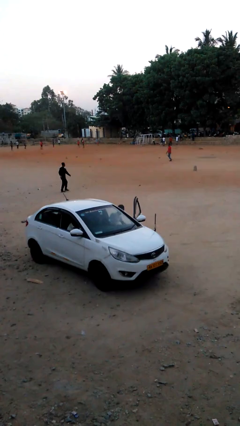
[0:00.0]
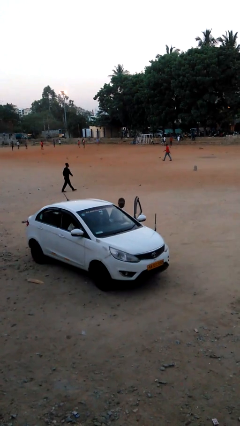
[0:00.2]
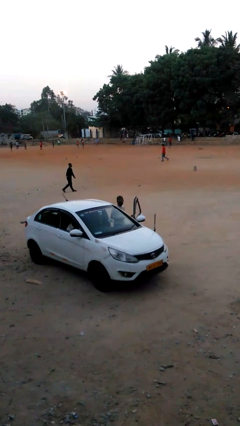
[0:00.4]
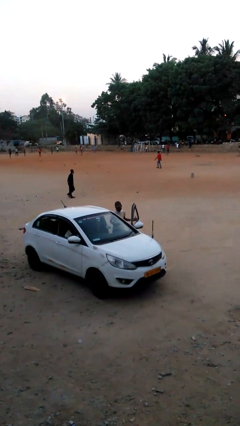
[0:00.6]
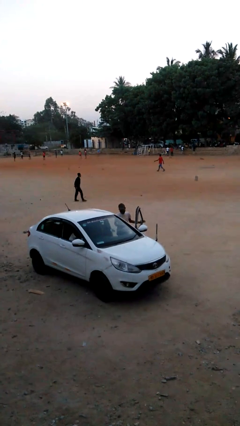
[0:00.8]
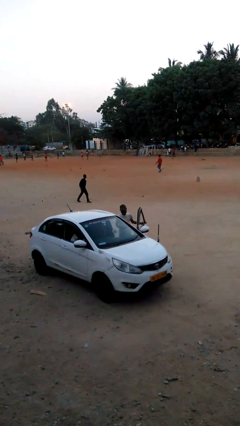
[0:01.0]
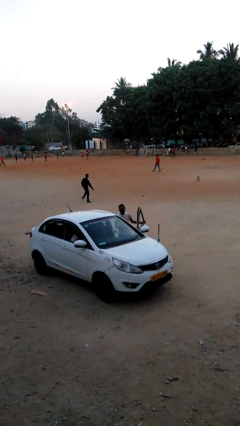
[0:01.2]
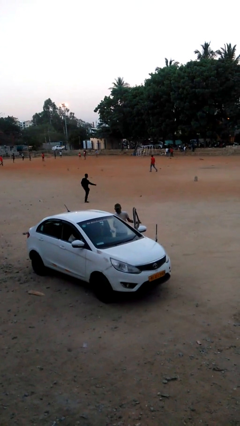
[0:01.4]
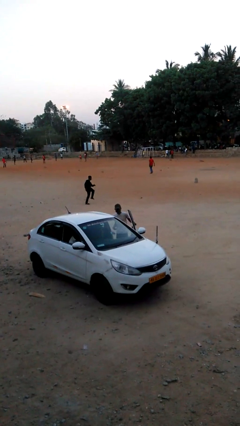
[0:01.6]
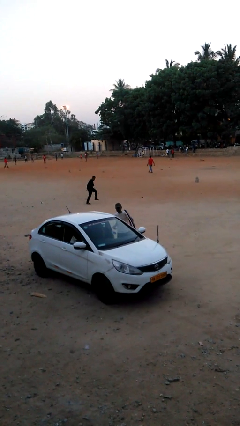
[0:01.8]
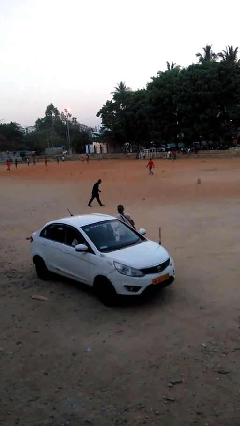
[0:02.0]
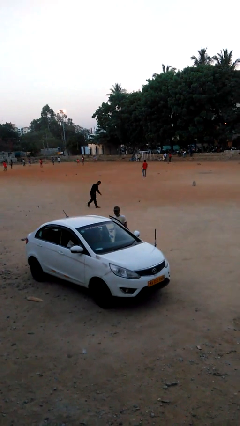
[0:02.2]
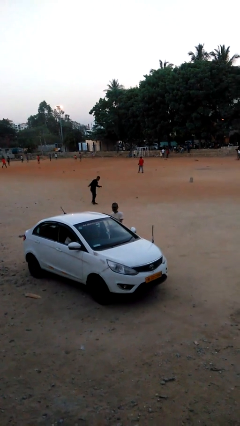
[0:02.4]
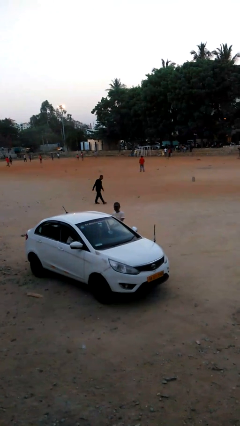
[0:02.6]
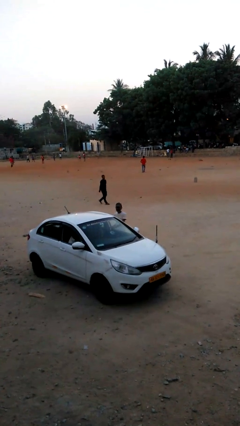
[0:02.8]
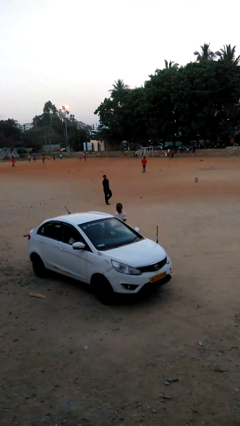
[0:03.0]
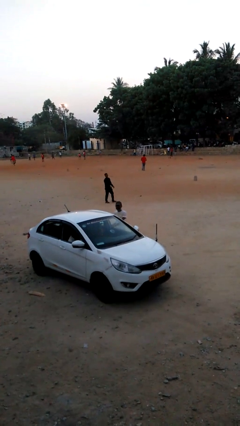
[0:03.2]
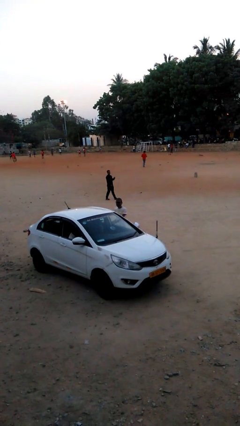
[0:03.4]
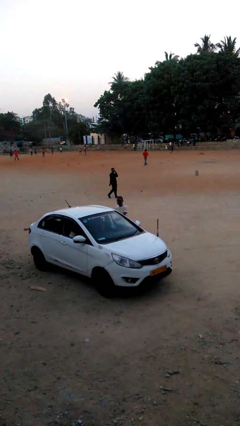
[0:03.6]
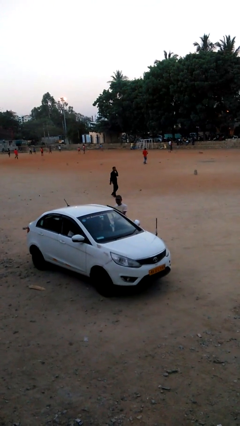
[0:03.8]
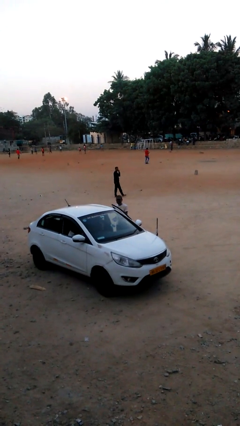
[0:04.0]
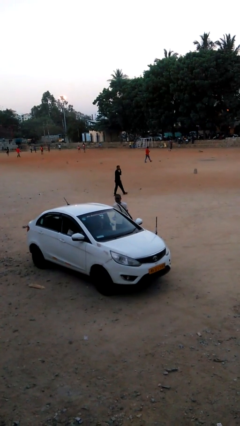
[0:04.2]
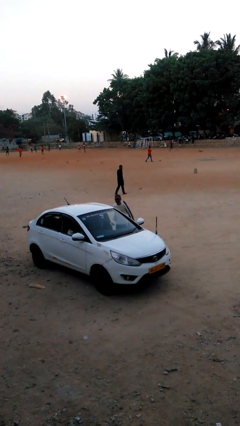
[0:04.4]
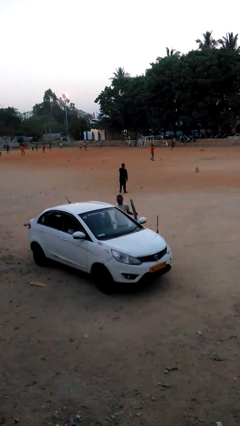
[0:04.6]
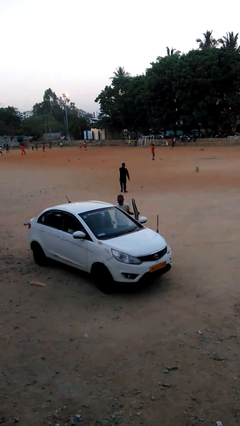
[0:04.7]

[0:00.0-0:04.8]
person exits car

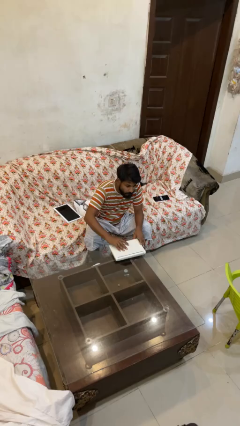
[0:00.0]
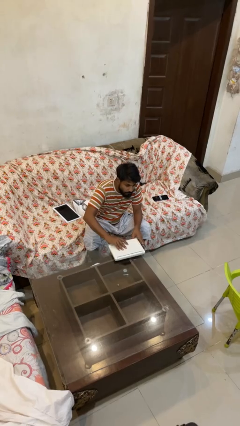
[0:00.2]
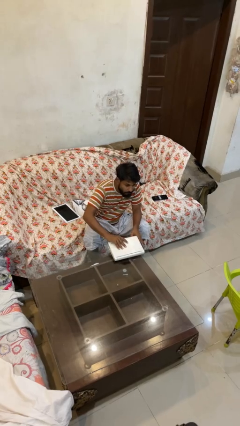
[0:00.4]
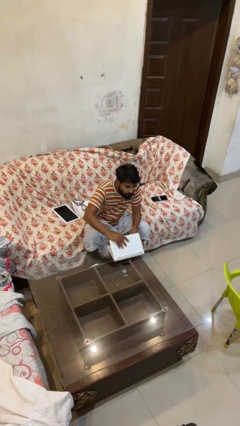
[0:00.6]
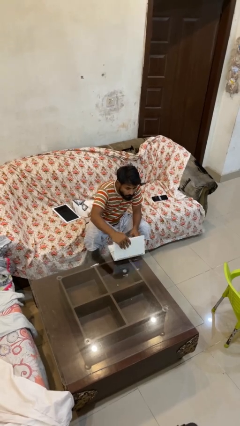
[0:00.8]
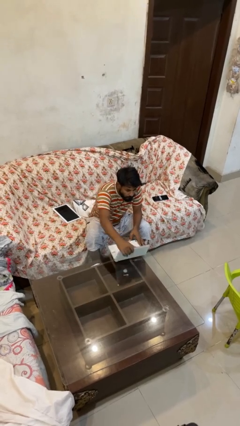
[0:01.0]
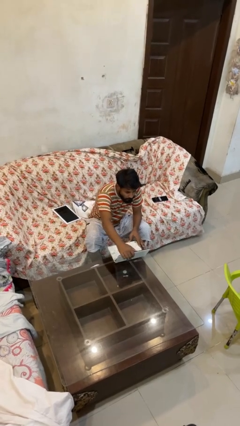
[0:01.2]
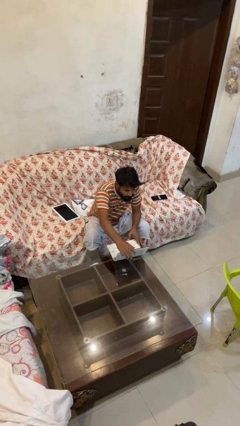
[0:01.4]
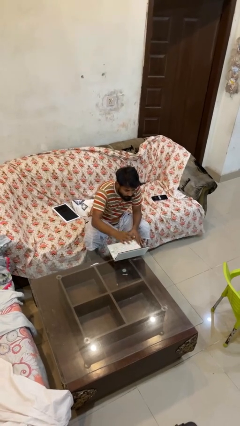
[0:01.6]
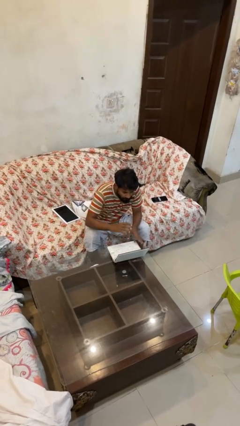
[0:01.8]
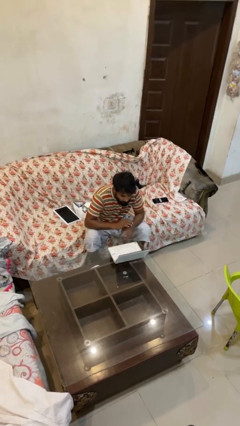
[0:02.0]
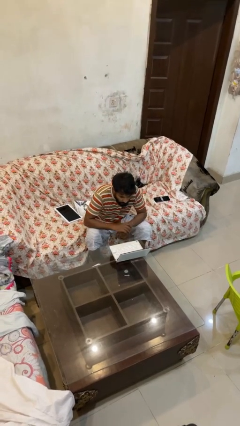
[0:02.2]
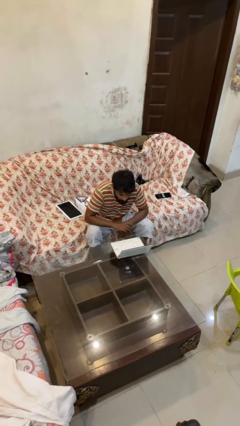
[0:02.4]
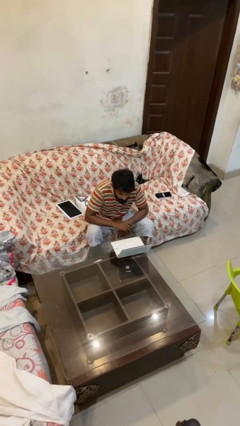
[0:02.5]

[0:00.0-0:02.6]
person opens laptop

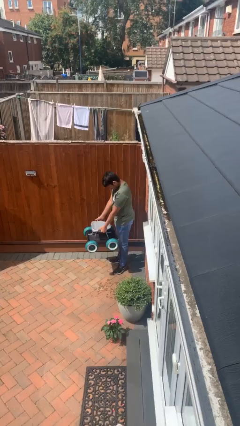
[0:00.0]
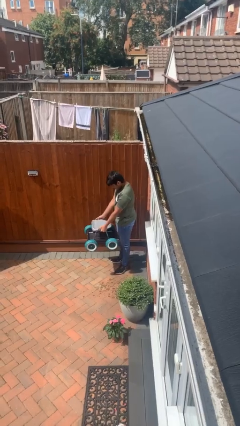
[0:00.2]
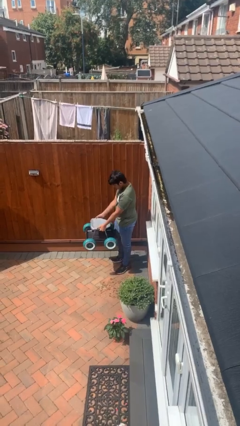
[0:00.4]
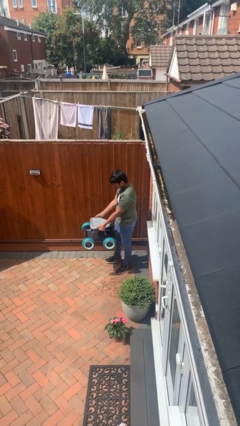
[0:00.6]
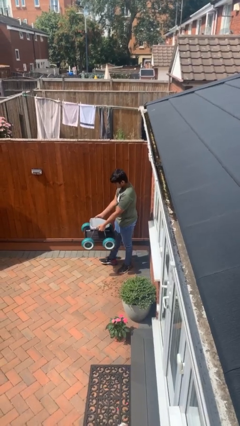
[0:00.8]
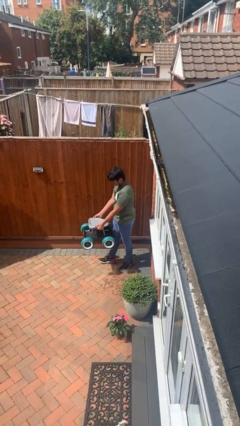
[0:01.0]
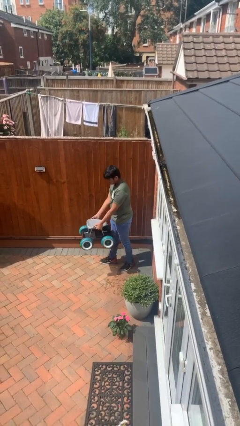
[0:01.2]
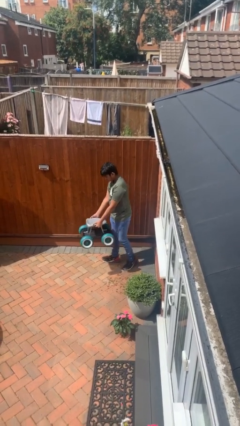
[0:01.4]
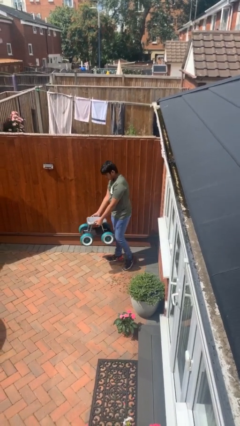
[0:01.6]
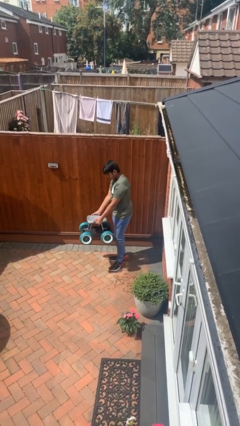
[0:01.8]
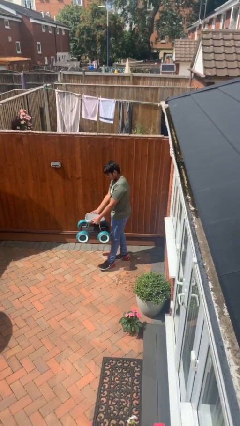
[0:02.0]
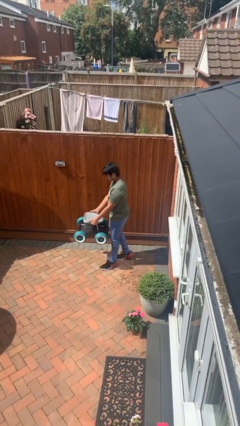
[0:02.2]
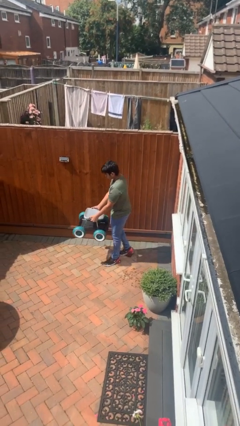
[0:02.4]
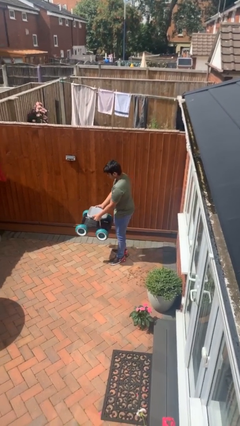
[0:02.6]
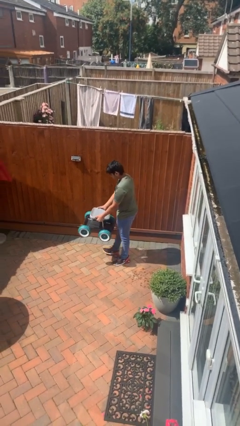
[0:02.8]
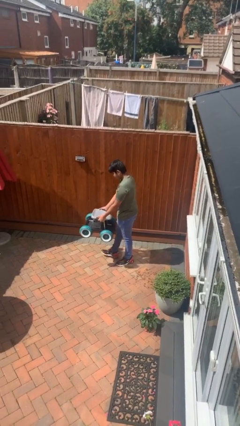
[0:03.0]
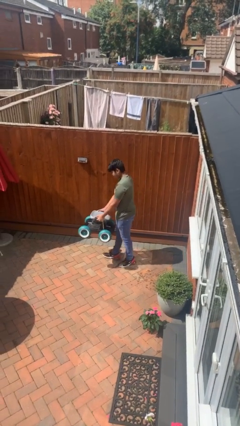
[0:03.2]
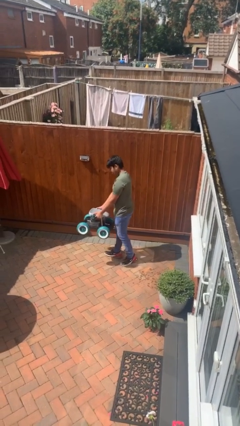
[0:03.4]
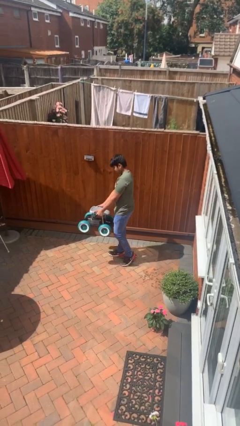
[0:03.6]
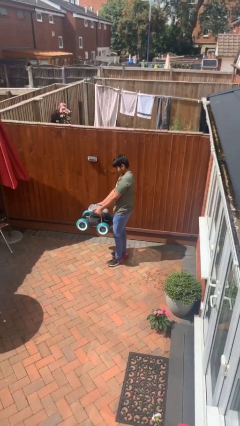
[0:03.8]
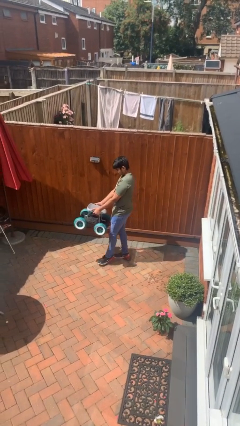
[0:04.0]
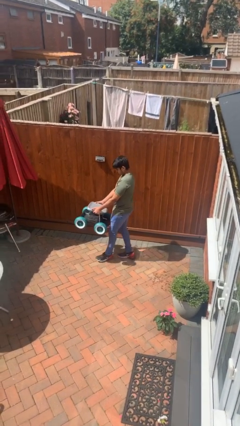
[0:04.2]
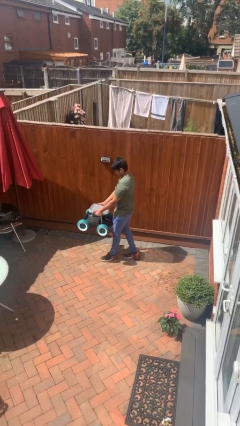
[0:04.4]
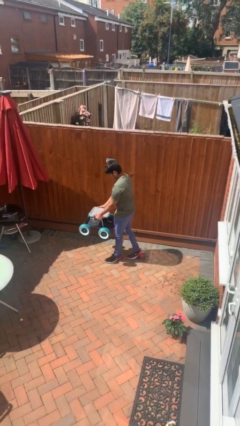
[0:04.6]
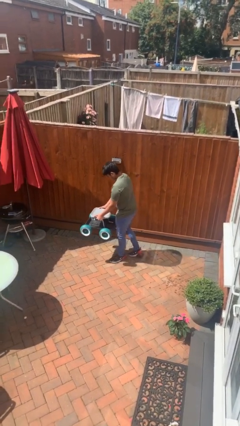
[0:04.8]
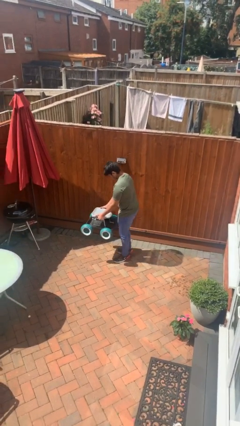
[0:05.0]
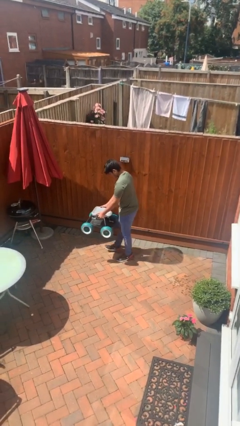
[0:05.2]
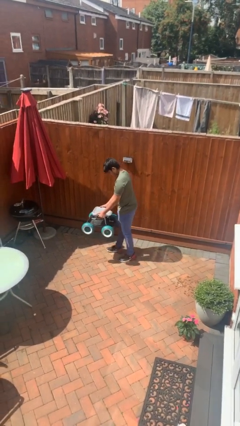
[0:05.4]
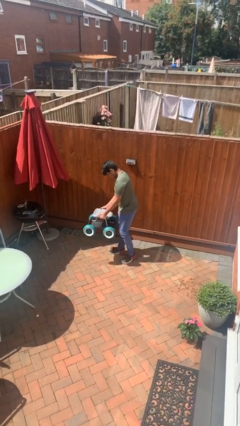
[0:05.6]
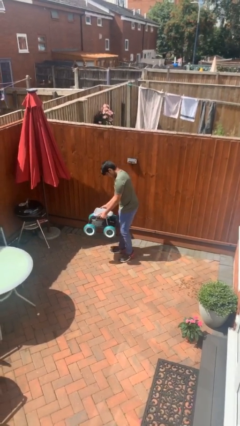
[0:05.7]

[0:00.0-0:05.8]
person carries heavy object

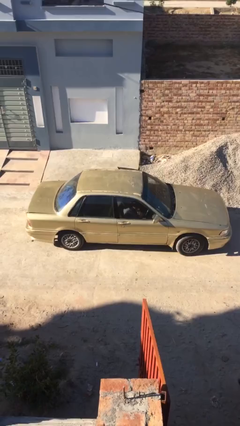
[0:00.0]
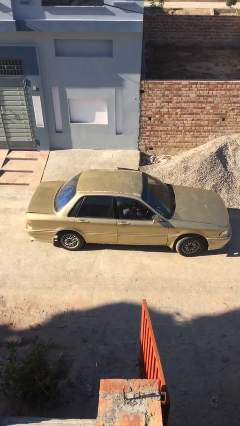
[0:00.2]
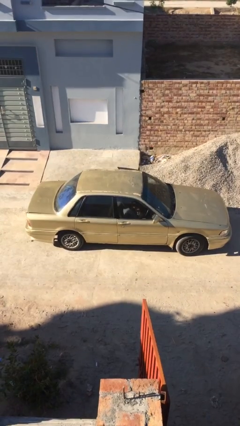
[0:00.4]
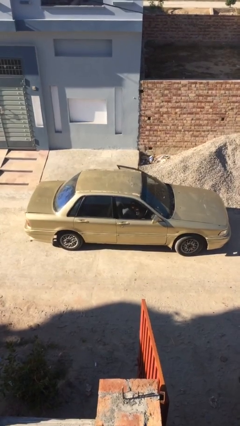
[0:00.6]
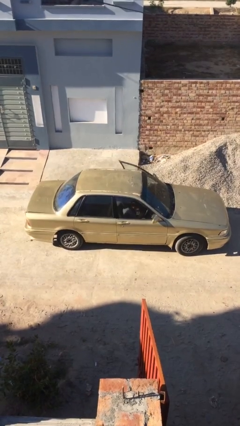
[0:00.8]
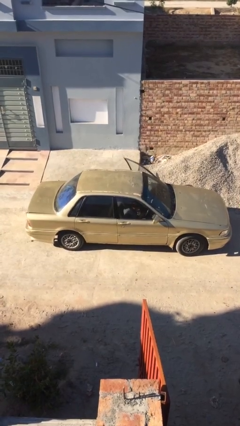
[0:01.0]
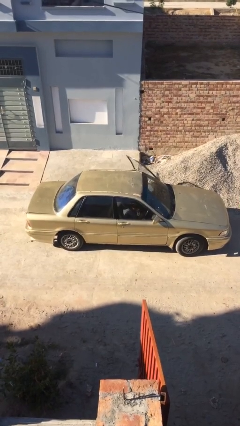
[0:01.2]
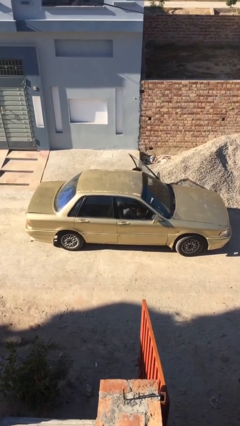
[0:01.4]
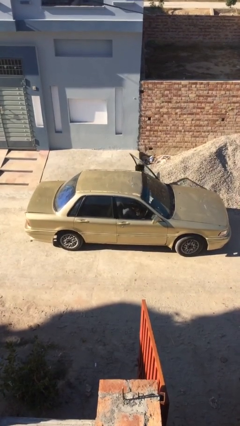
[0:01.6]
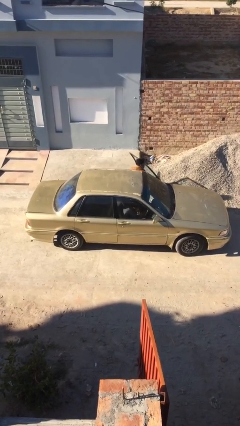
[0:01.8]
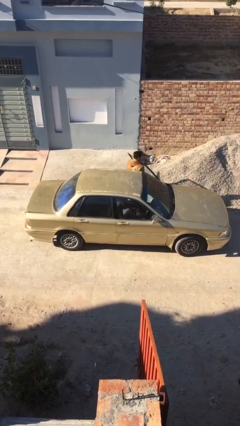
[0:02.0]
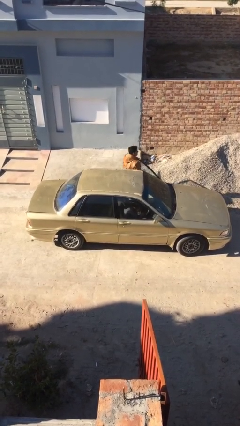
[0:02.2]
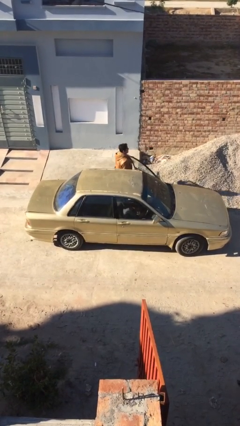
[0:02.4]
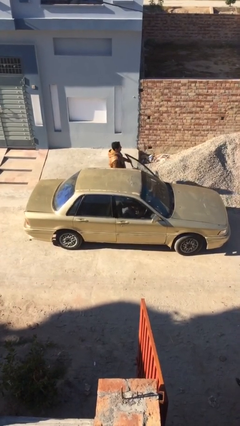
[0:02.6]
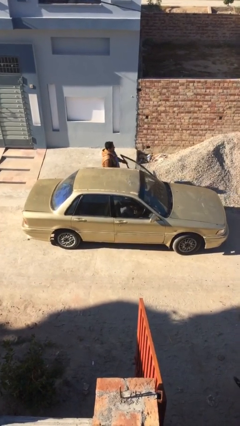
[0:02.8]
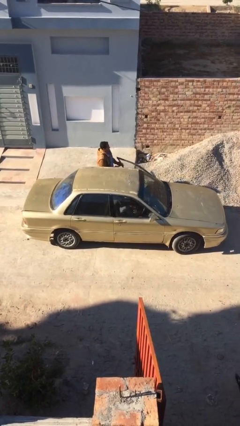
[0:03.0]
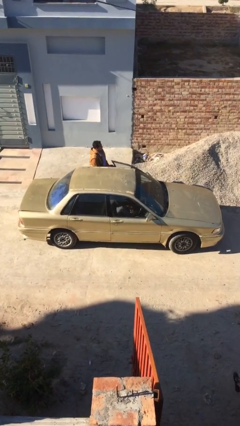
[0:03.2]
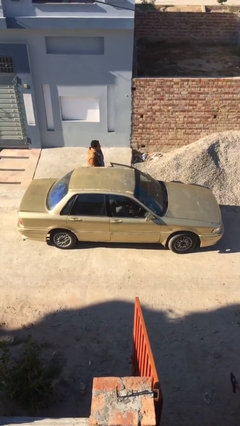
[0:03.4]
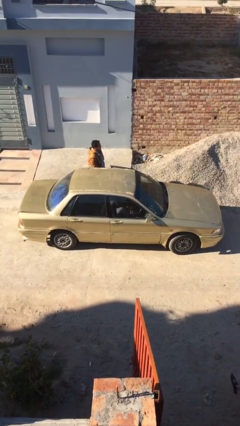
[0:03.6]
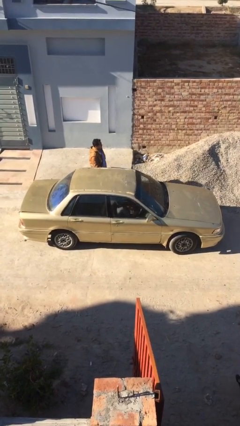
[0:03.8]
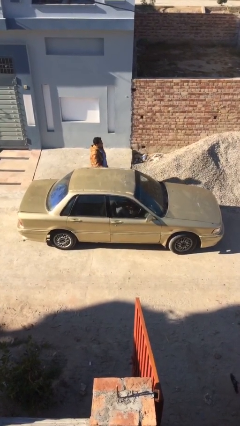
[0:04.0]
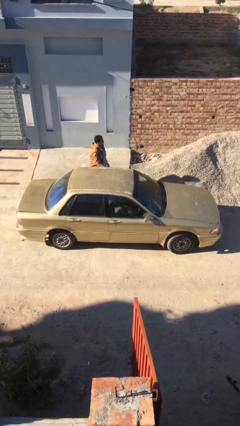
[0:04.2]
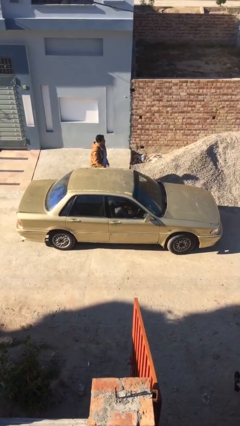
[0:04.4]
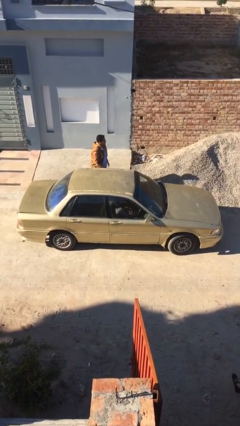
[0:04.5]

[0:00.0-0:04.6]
car drops off person
